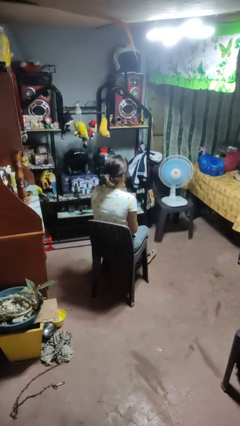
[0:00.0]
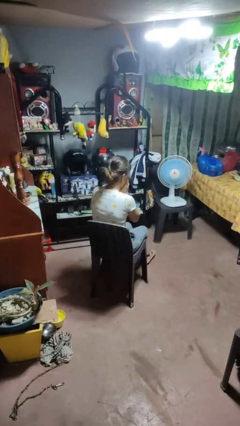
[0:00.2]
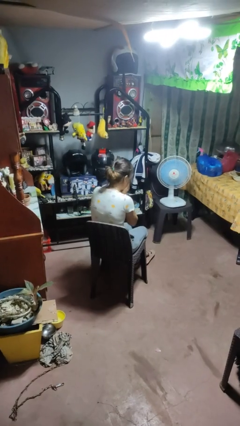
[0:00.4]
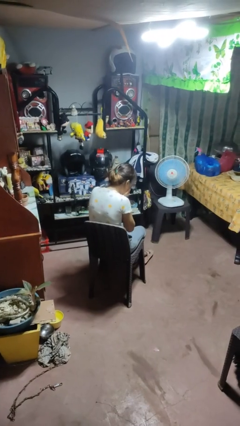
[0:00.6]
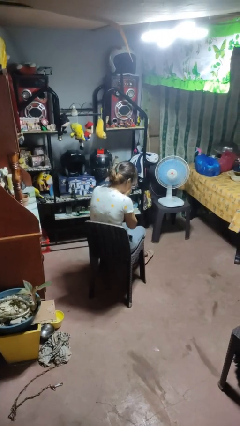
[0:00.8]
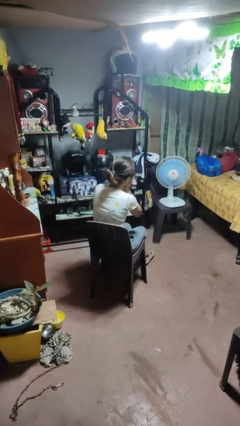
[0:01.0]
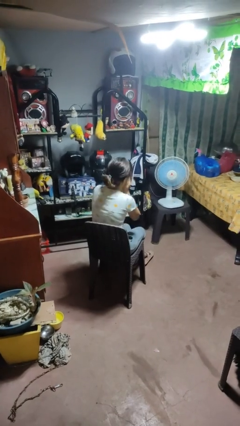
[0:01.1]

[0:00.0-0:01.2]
person sneezes into hand

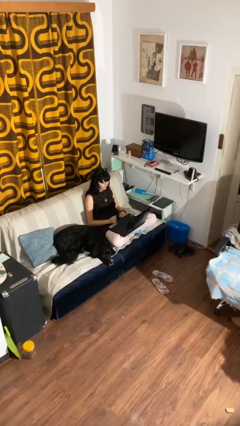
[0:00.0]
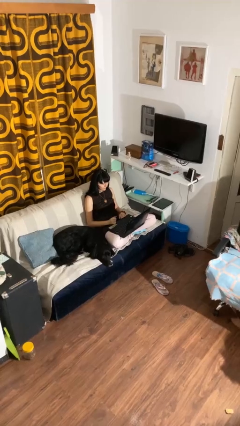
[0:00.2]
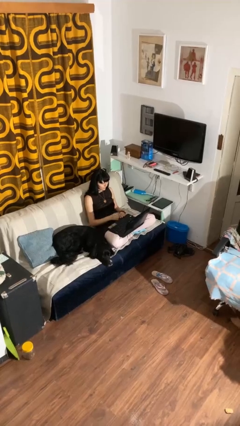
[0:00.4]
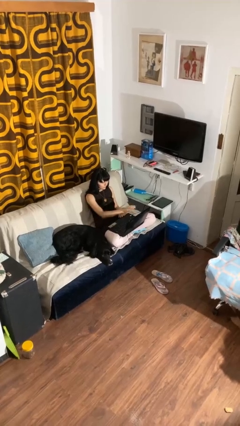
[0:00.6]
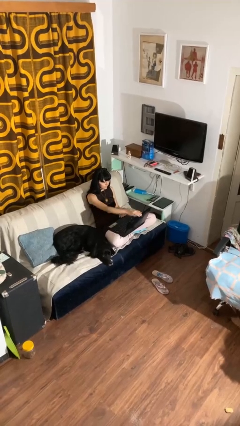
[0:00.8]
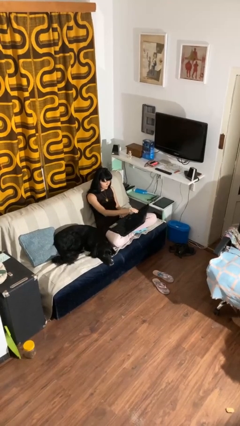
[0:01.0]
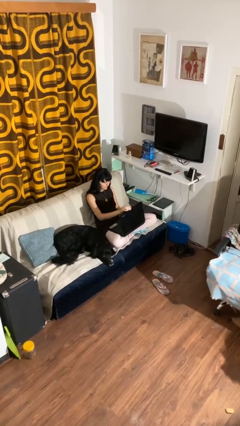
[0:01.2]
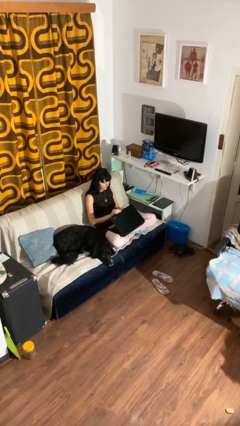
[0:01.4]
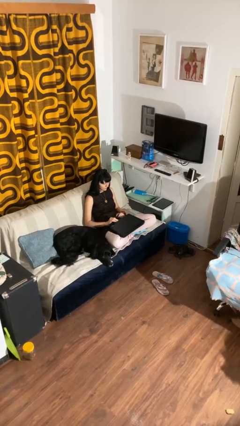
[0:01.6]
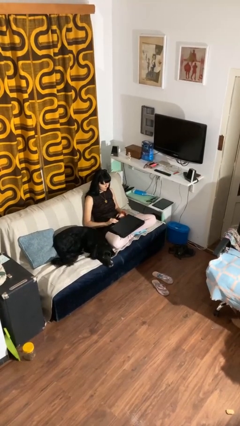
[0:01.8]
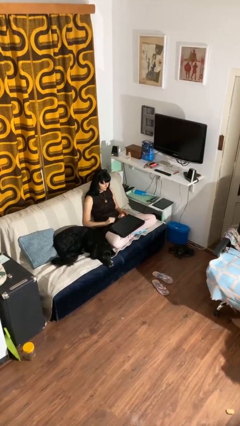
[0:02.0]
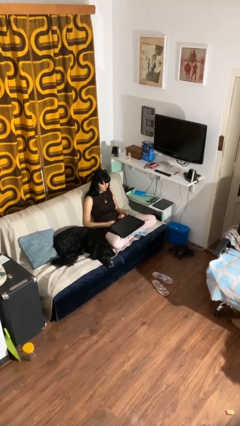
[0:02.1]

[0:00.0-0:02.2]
person closes laptop

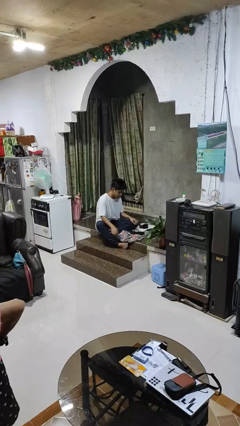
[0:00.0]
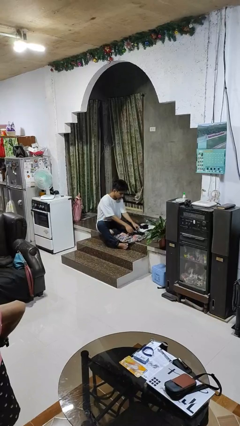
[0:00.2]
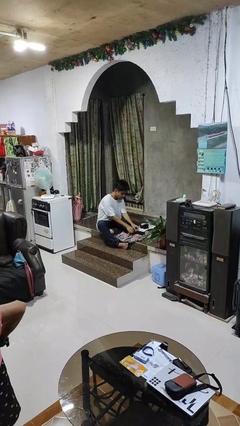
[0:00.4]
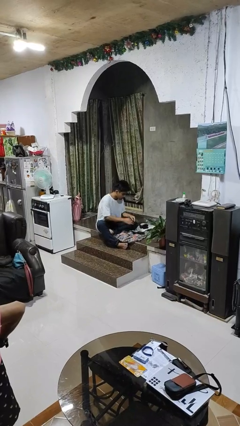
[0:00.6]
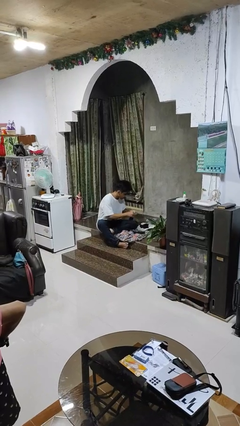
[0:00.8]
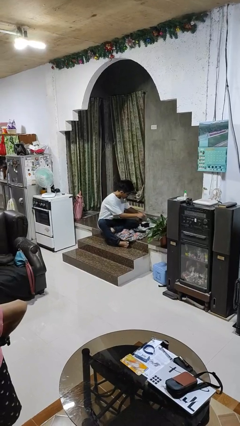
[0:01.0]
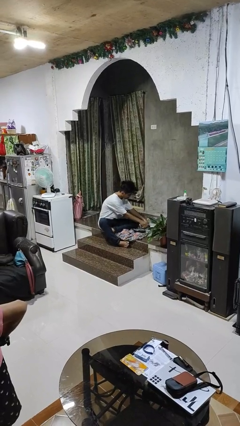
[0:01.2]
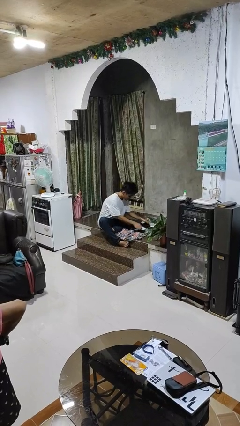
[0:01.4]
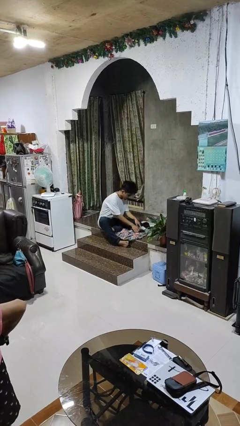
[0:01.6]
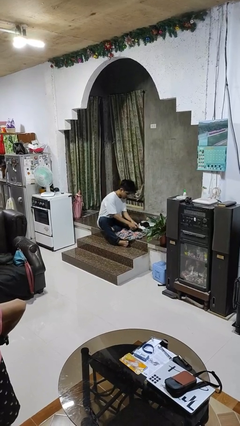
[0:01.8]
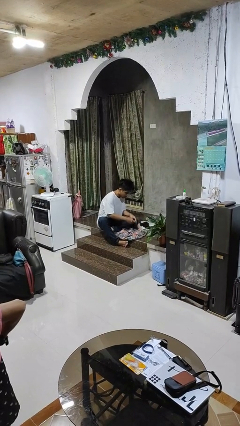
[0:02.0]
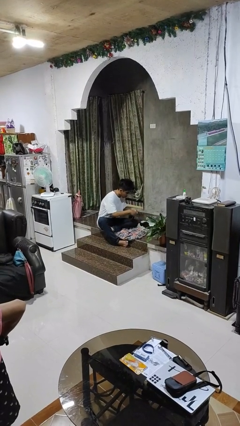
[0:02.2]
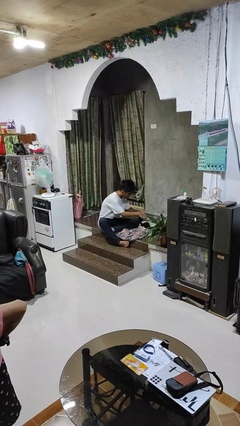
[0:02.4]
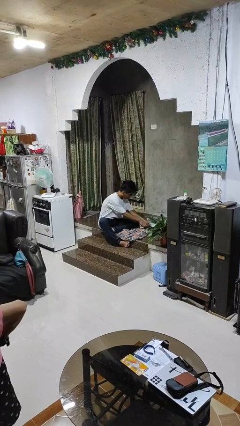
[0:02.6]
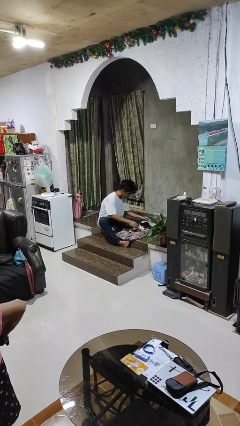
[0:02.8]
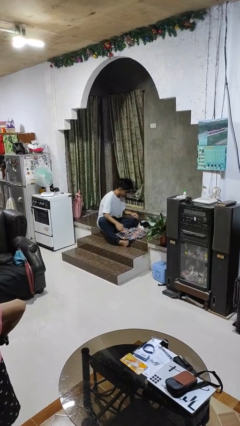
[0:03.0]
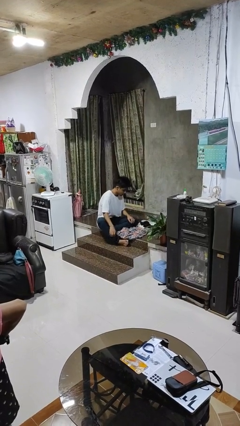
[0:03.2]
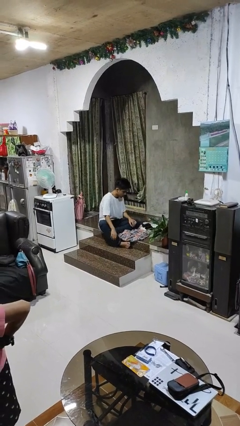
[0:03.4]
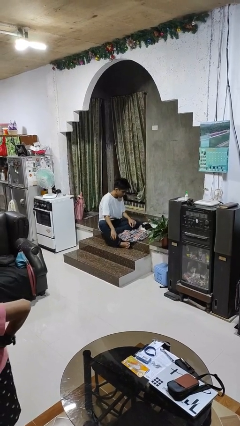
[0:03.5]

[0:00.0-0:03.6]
person folds socks

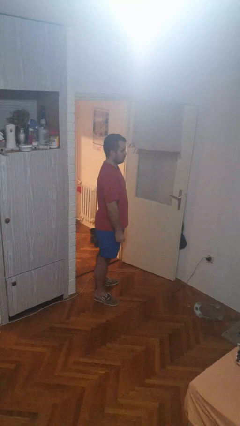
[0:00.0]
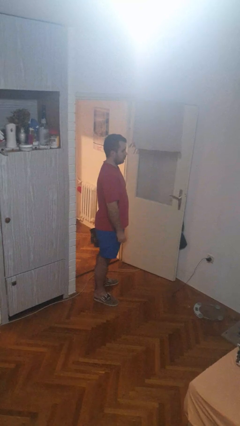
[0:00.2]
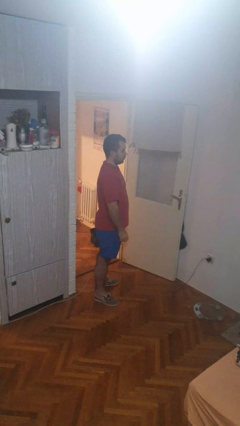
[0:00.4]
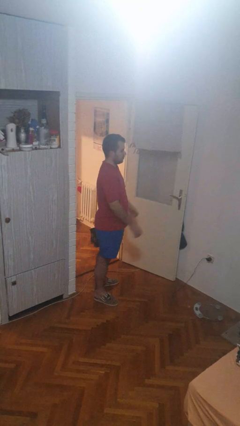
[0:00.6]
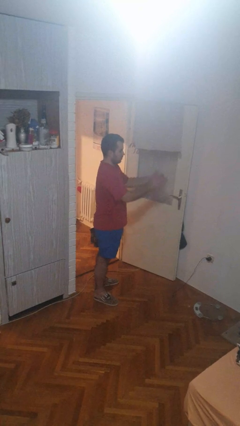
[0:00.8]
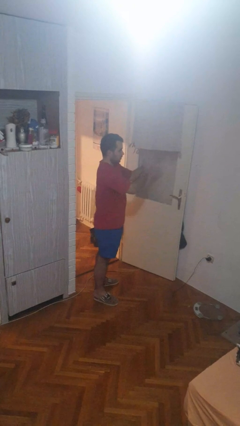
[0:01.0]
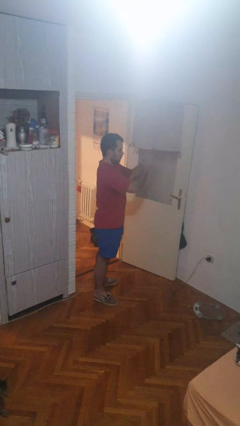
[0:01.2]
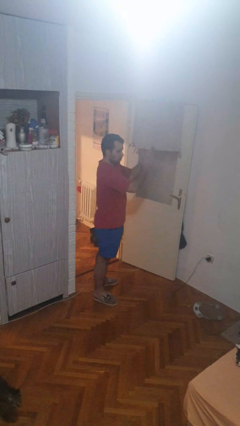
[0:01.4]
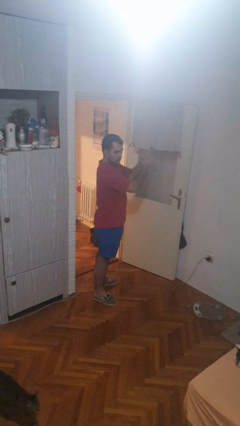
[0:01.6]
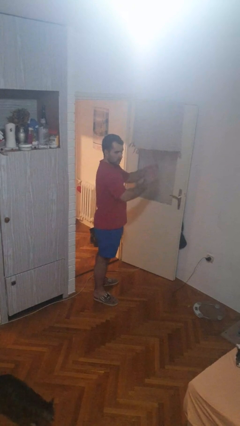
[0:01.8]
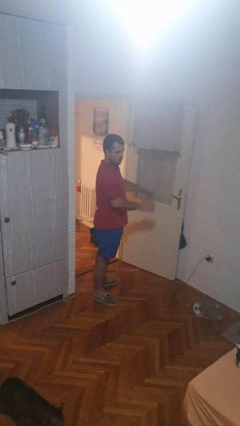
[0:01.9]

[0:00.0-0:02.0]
person claps hands

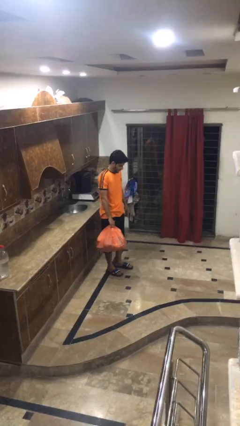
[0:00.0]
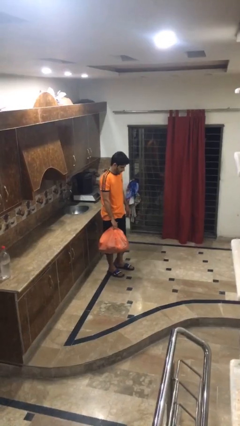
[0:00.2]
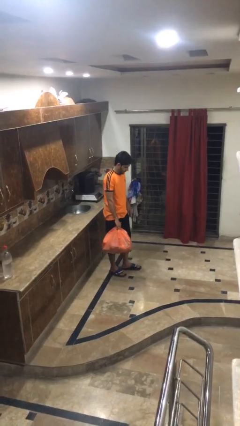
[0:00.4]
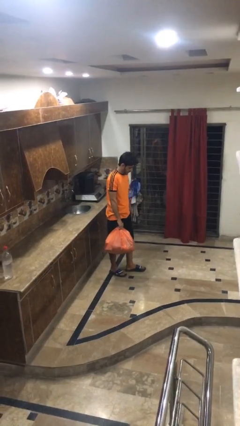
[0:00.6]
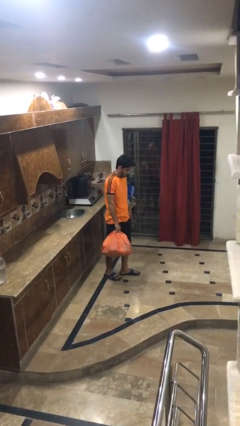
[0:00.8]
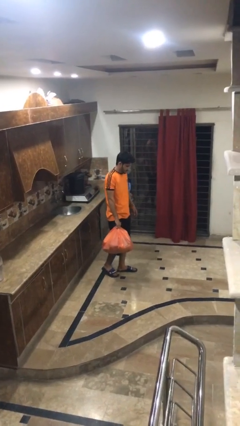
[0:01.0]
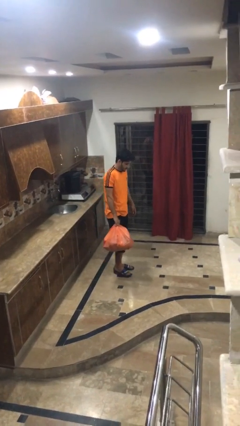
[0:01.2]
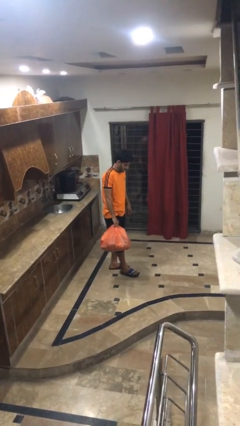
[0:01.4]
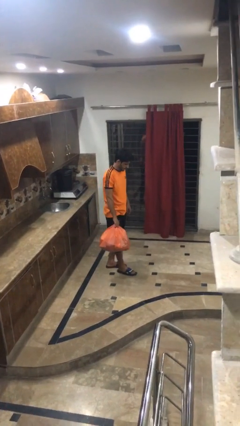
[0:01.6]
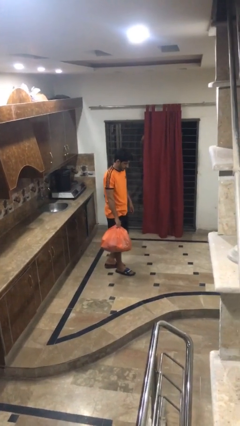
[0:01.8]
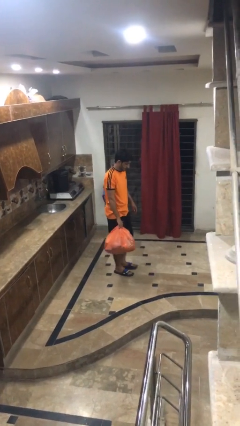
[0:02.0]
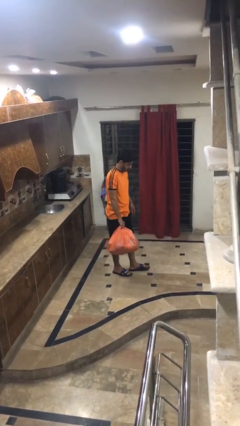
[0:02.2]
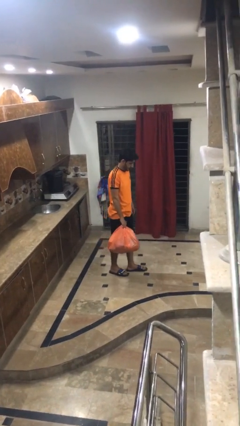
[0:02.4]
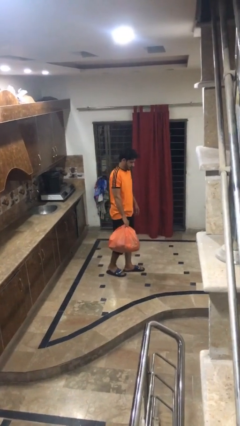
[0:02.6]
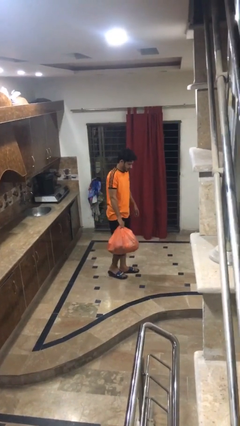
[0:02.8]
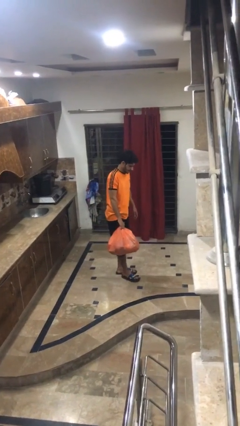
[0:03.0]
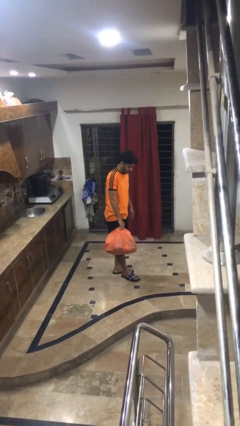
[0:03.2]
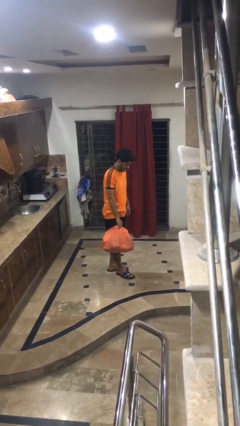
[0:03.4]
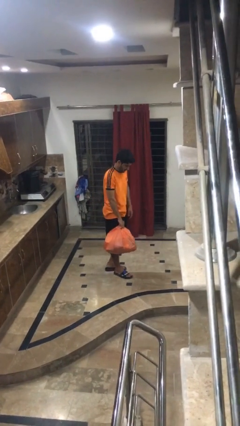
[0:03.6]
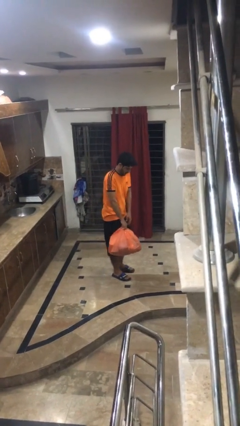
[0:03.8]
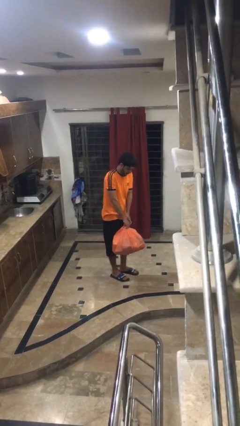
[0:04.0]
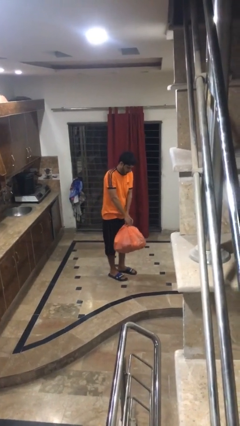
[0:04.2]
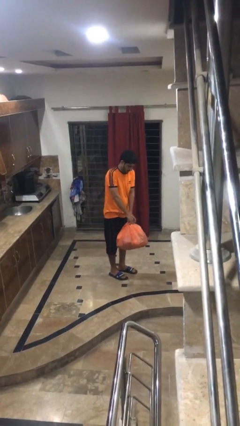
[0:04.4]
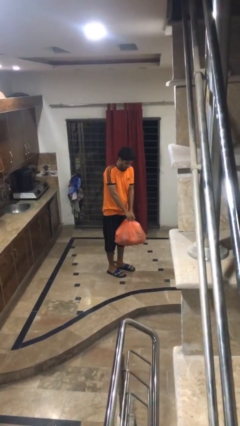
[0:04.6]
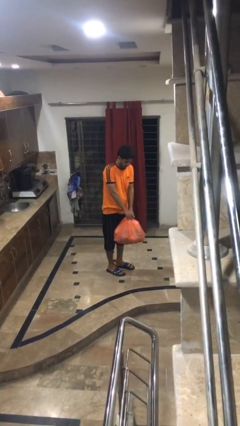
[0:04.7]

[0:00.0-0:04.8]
person carries groceries

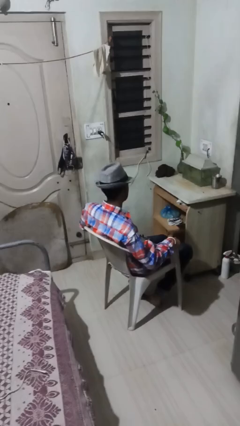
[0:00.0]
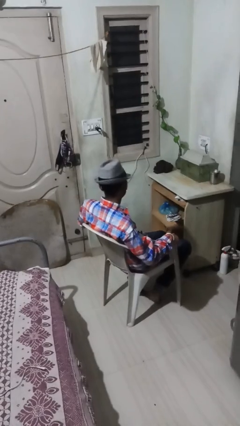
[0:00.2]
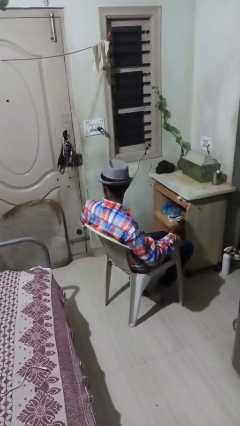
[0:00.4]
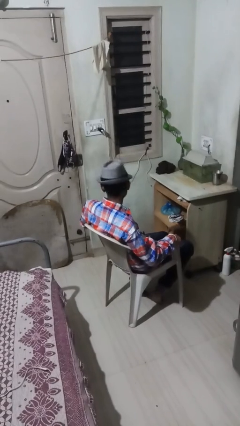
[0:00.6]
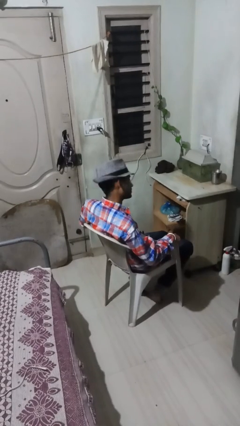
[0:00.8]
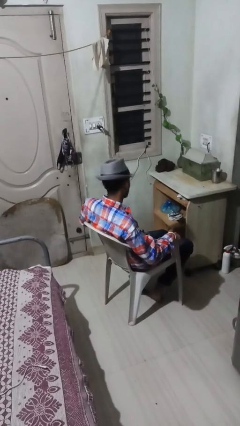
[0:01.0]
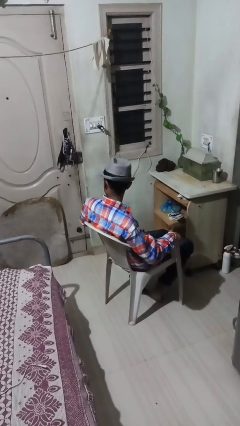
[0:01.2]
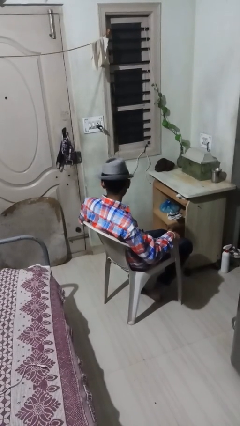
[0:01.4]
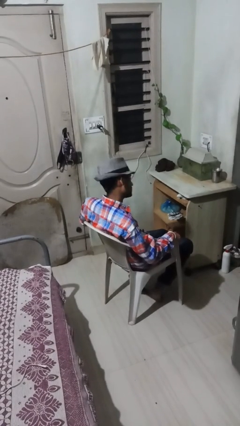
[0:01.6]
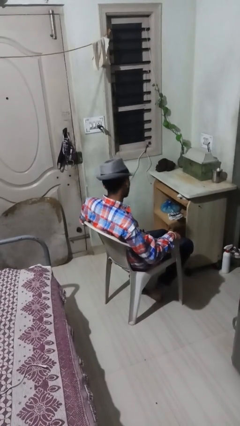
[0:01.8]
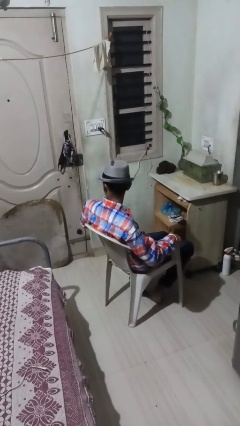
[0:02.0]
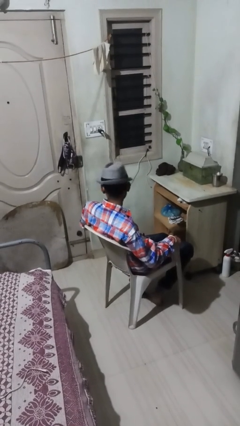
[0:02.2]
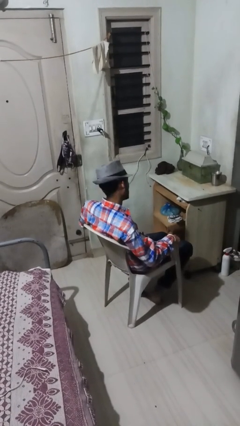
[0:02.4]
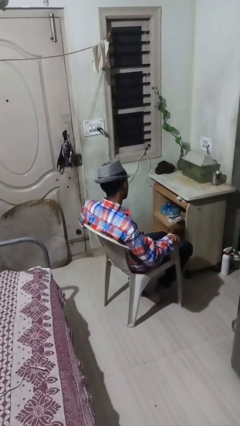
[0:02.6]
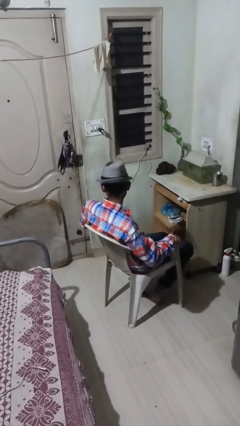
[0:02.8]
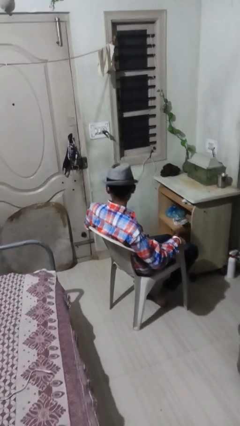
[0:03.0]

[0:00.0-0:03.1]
person shakes head

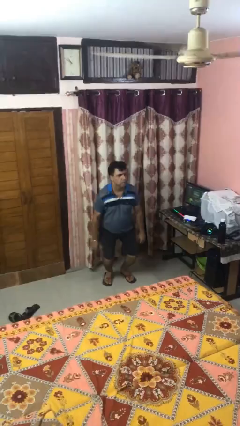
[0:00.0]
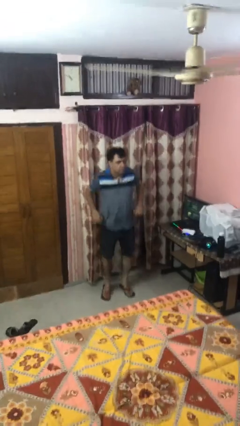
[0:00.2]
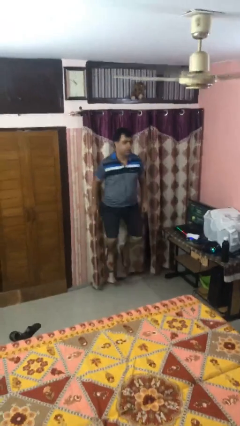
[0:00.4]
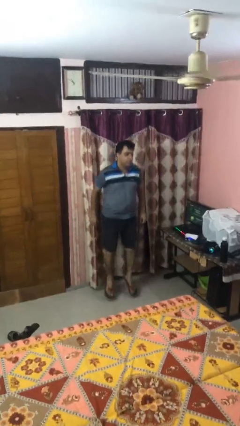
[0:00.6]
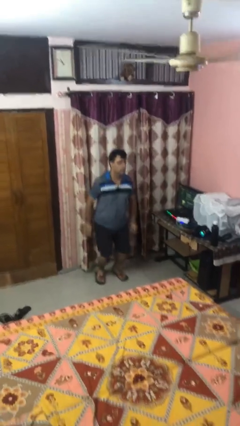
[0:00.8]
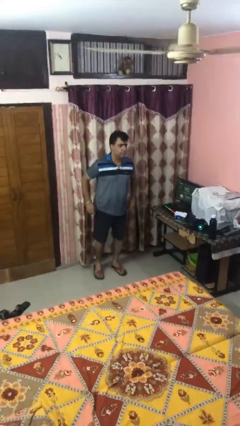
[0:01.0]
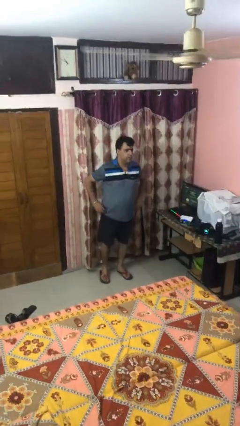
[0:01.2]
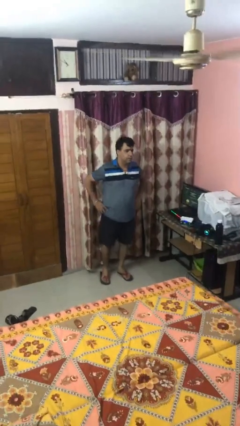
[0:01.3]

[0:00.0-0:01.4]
person jumps
